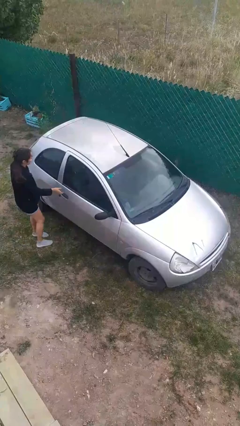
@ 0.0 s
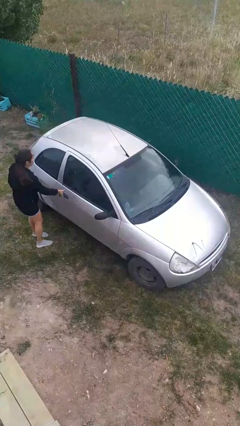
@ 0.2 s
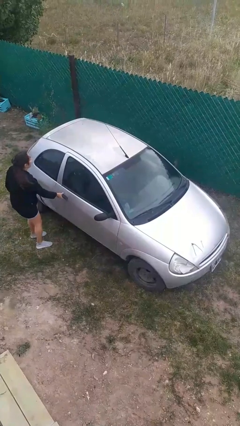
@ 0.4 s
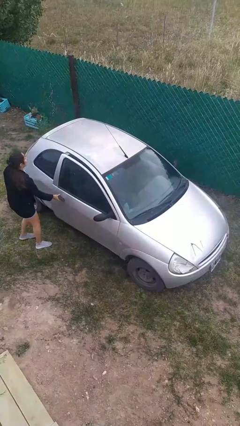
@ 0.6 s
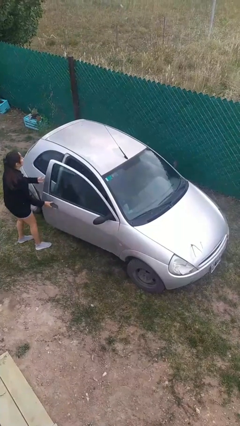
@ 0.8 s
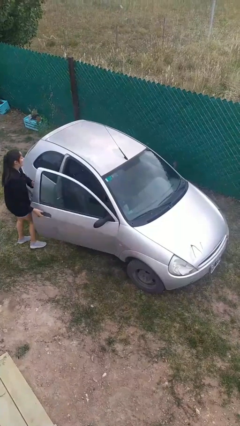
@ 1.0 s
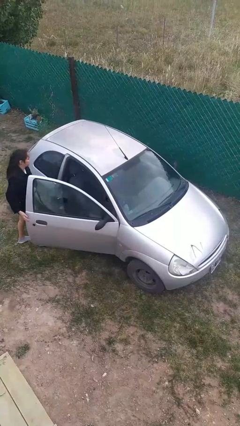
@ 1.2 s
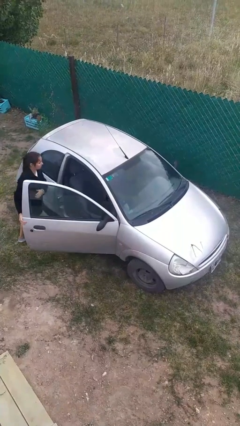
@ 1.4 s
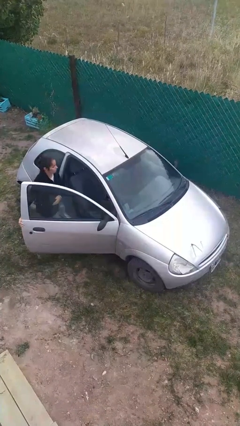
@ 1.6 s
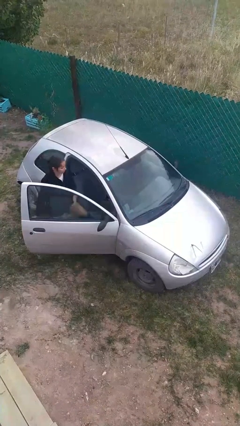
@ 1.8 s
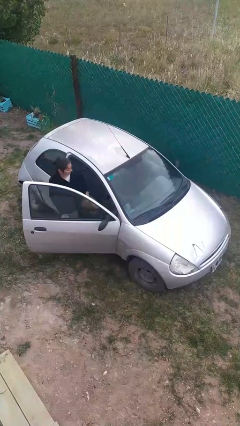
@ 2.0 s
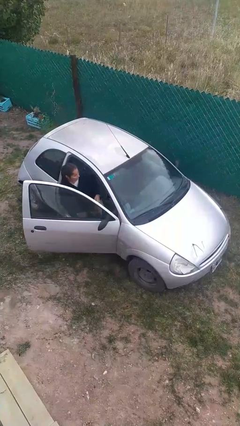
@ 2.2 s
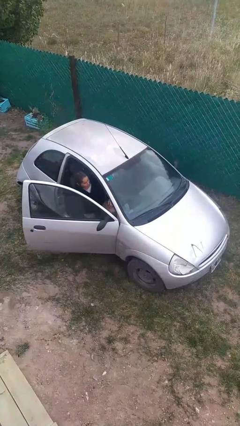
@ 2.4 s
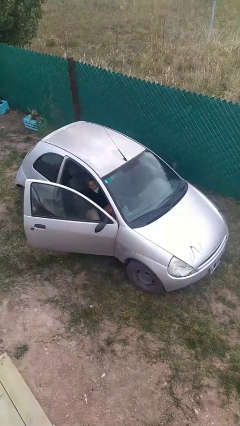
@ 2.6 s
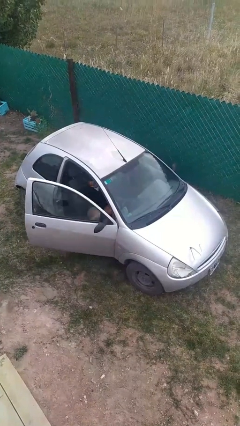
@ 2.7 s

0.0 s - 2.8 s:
car picks up person

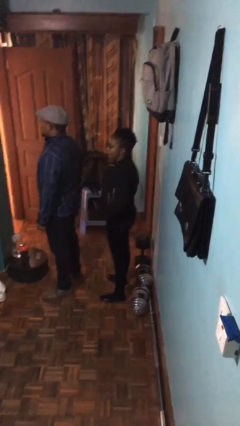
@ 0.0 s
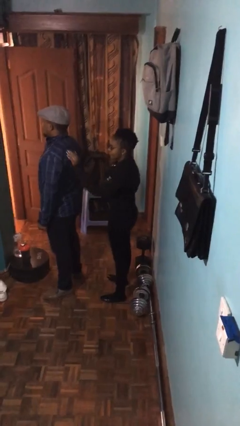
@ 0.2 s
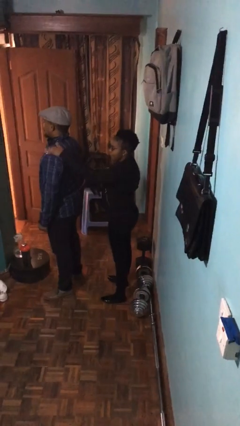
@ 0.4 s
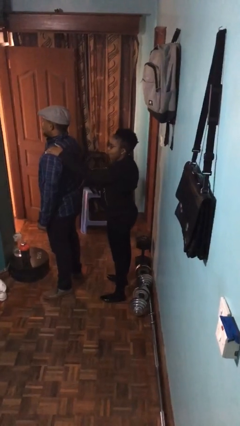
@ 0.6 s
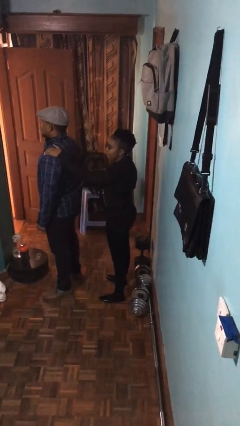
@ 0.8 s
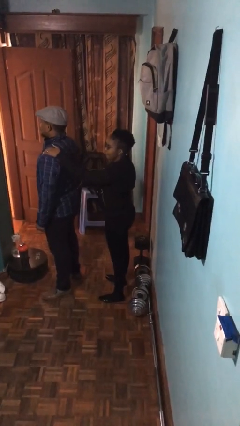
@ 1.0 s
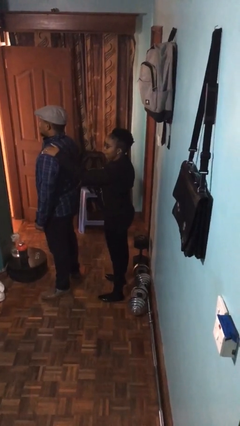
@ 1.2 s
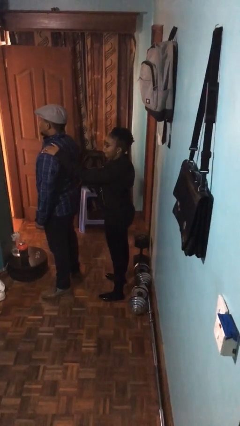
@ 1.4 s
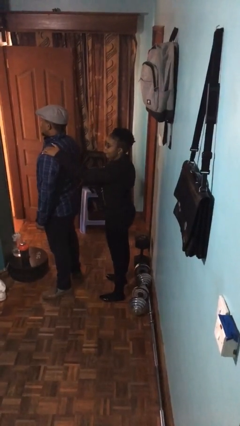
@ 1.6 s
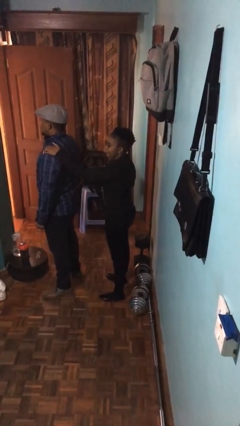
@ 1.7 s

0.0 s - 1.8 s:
person grabs person by shoulder

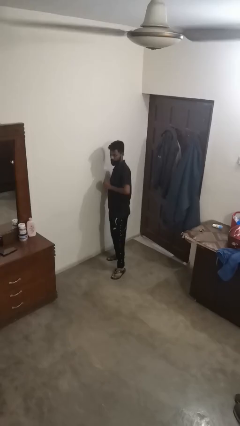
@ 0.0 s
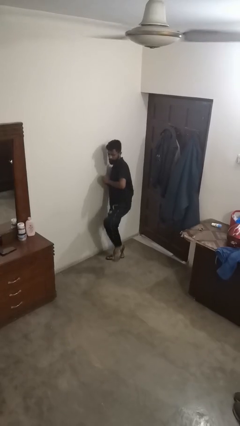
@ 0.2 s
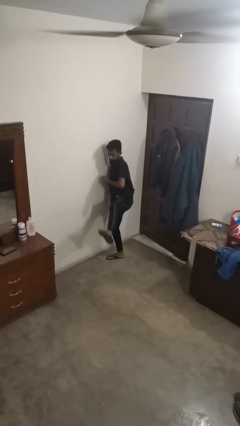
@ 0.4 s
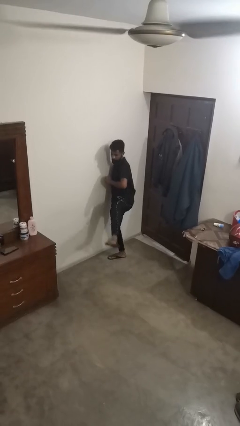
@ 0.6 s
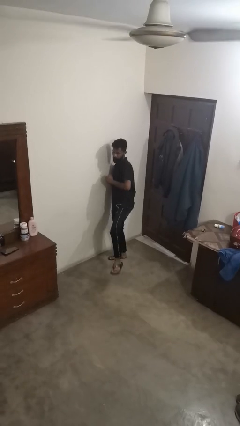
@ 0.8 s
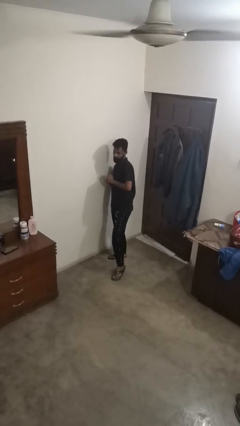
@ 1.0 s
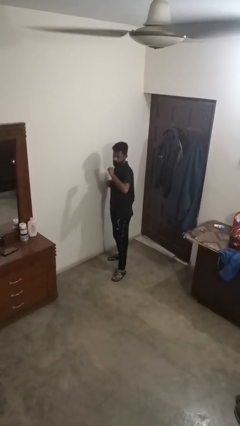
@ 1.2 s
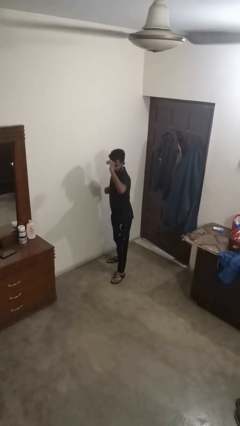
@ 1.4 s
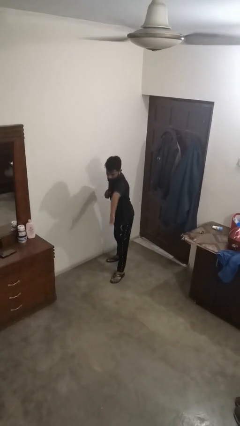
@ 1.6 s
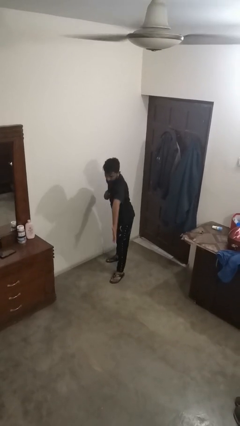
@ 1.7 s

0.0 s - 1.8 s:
person karate kicks

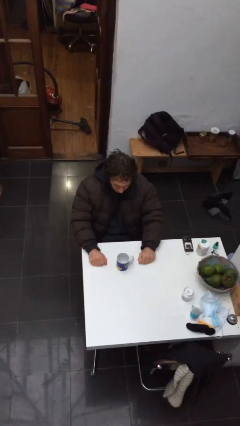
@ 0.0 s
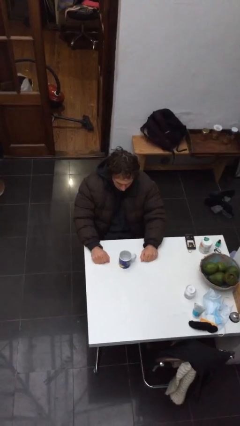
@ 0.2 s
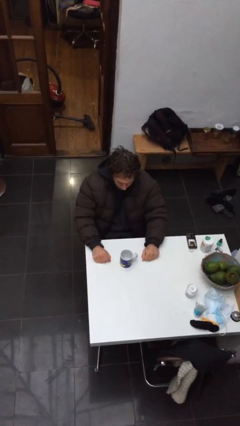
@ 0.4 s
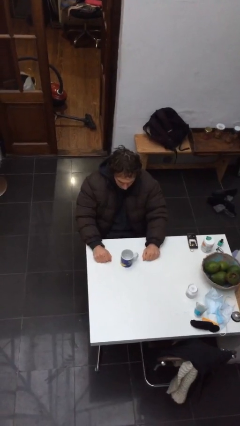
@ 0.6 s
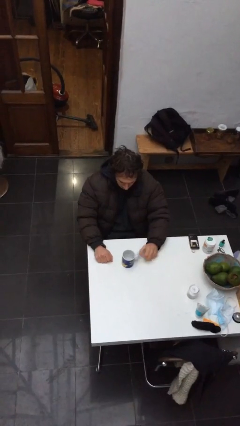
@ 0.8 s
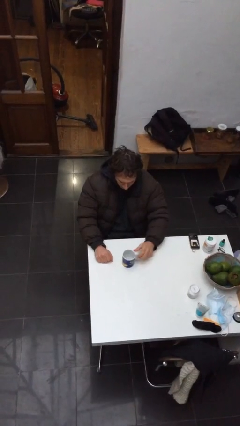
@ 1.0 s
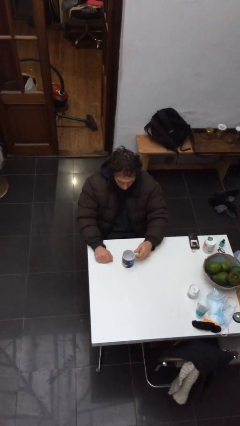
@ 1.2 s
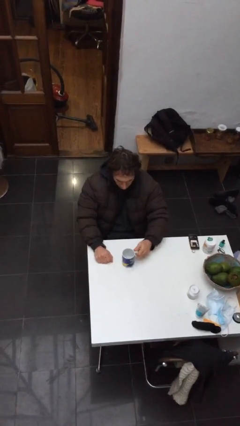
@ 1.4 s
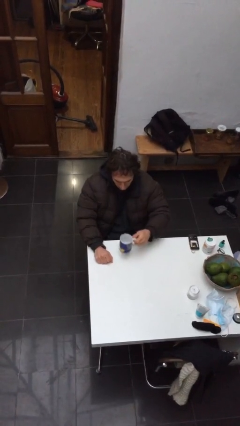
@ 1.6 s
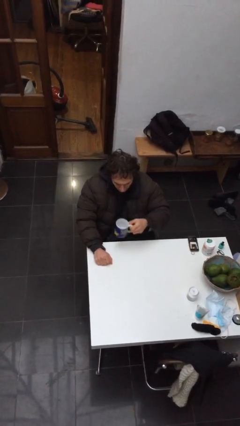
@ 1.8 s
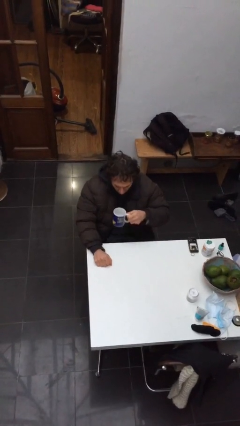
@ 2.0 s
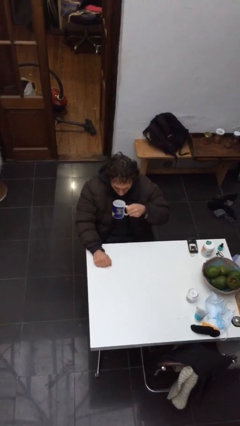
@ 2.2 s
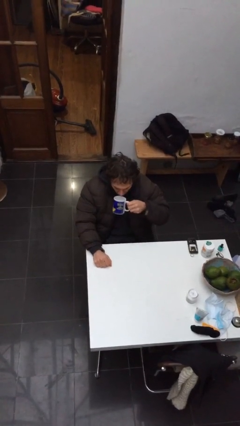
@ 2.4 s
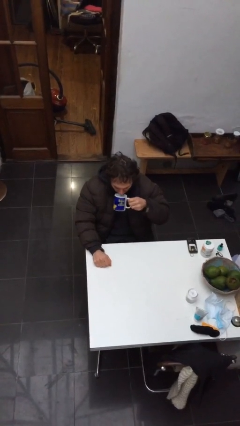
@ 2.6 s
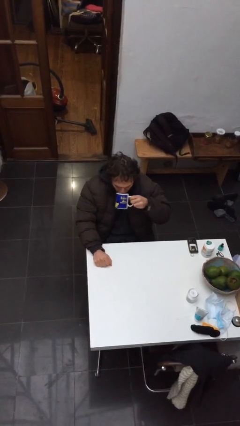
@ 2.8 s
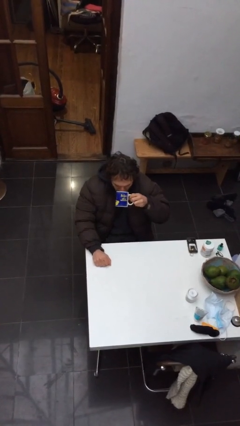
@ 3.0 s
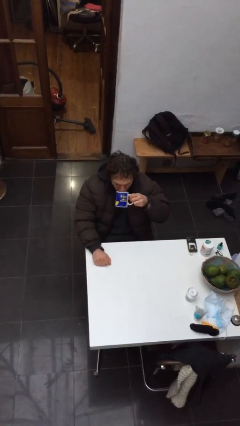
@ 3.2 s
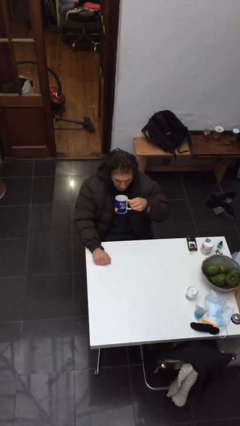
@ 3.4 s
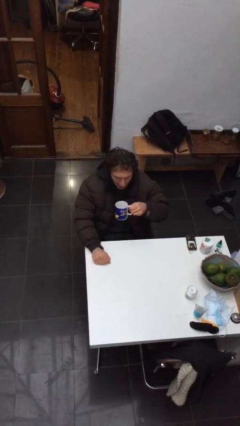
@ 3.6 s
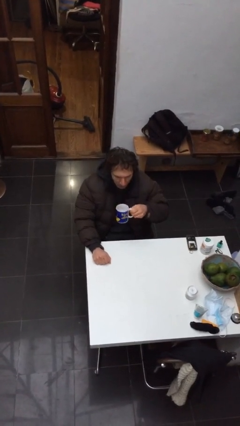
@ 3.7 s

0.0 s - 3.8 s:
person picks up object from table

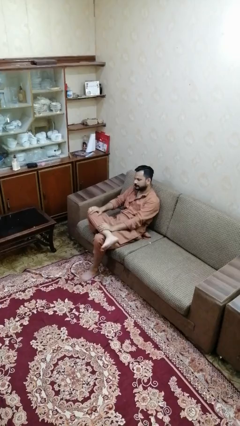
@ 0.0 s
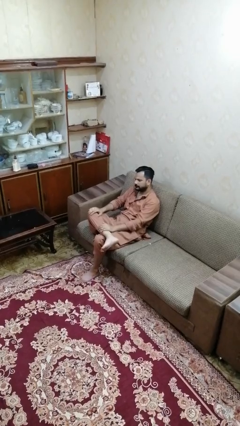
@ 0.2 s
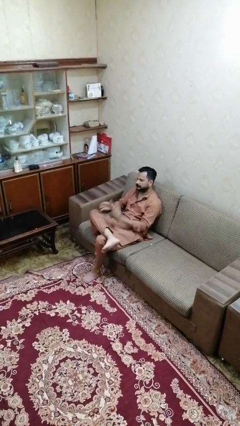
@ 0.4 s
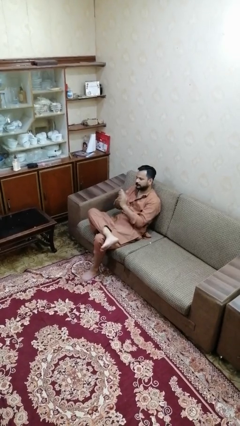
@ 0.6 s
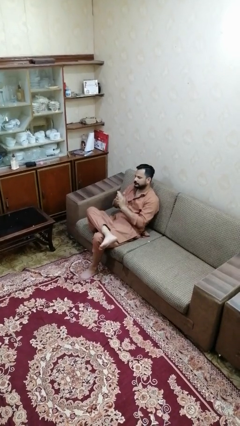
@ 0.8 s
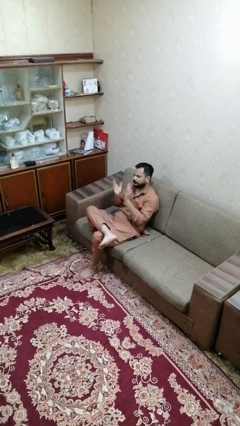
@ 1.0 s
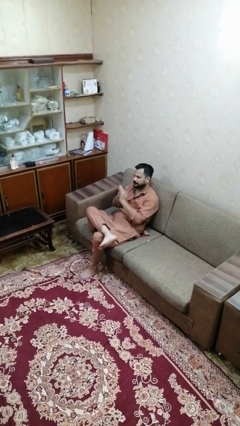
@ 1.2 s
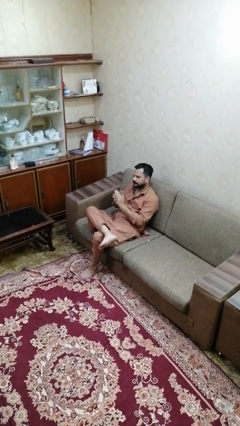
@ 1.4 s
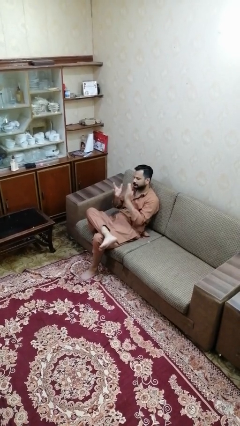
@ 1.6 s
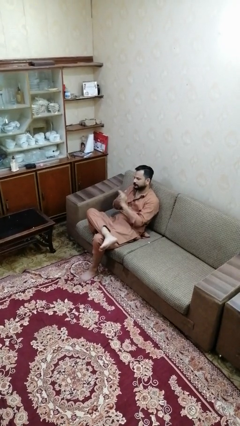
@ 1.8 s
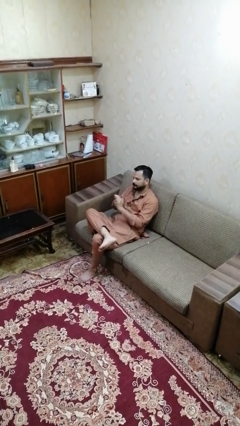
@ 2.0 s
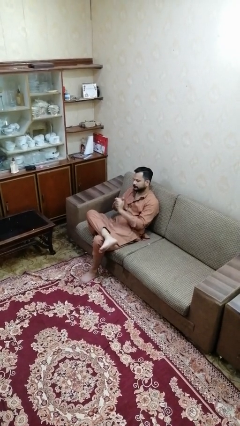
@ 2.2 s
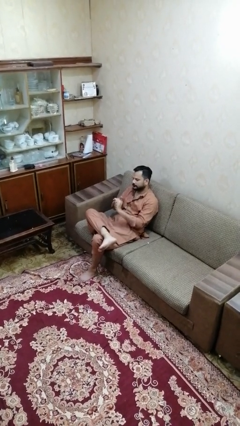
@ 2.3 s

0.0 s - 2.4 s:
person claps hands

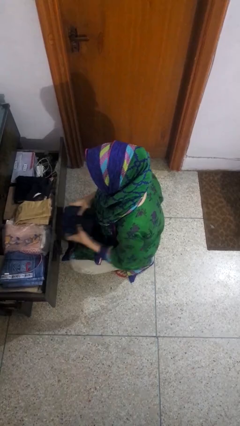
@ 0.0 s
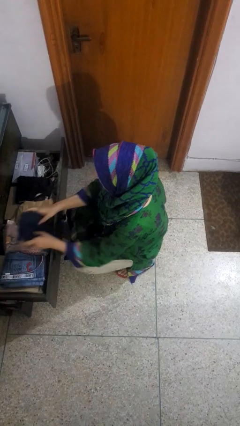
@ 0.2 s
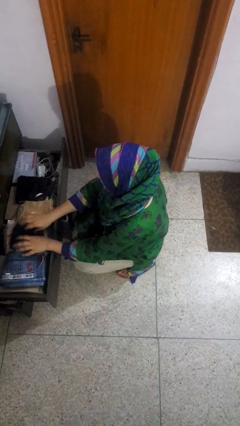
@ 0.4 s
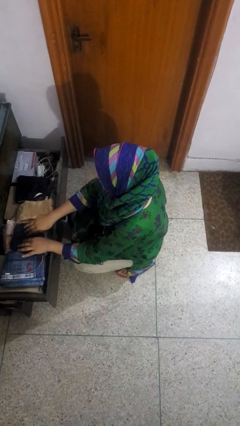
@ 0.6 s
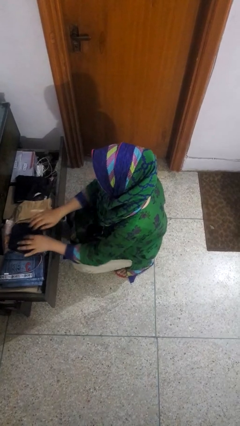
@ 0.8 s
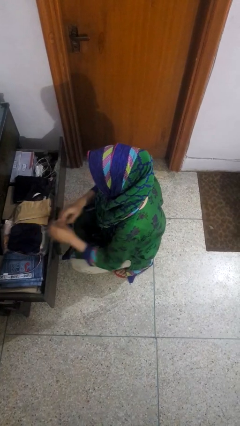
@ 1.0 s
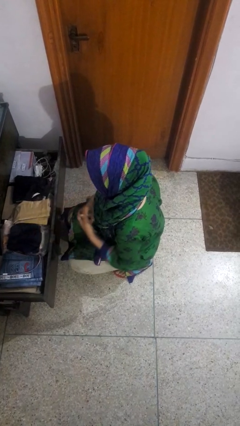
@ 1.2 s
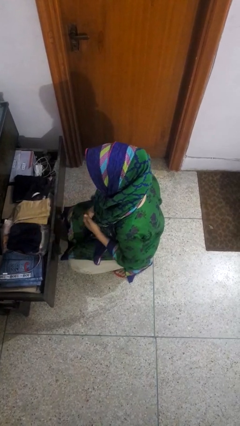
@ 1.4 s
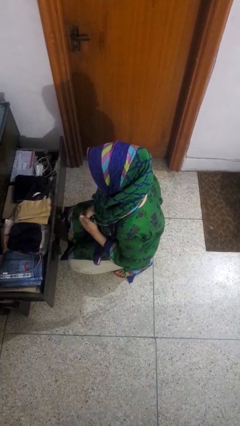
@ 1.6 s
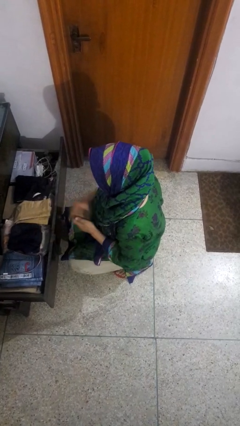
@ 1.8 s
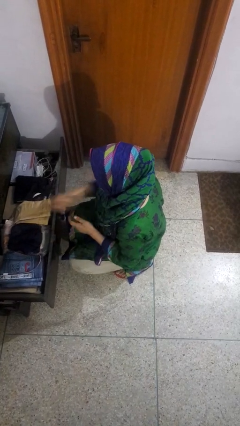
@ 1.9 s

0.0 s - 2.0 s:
person puts clothes into dresser

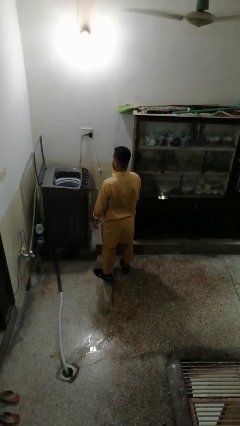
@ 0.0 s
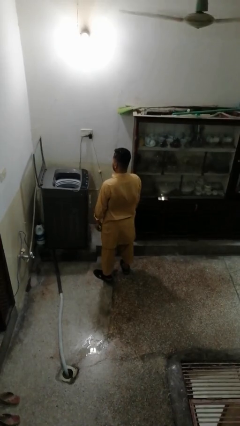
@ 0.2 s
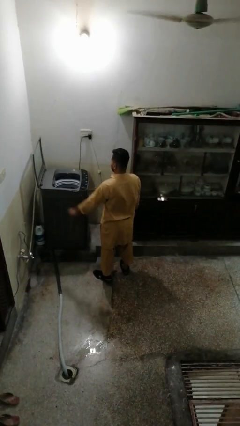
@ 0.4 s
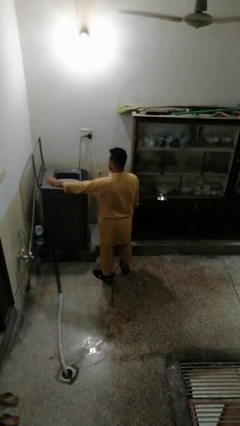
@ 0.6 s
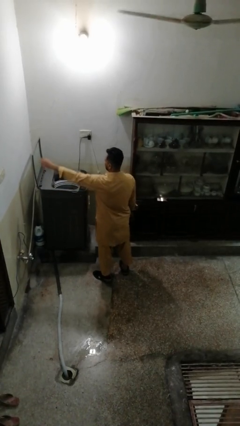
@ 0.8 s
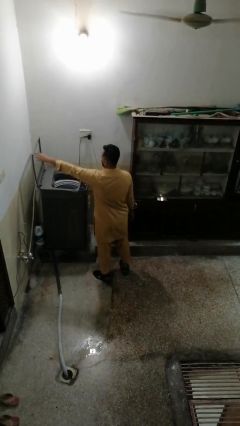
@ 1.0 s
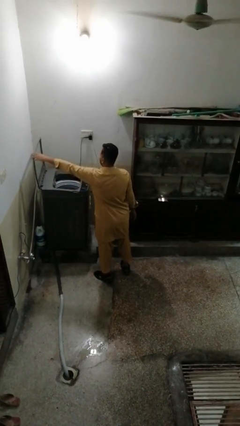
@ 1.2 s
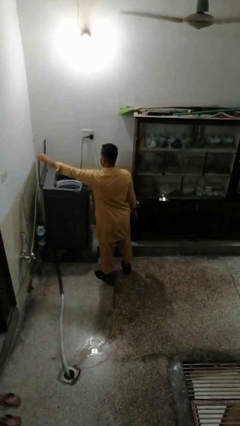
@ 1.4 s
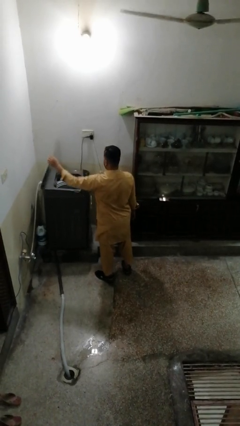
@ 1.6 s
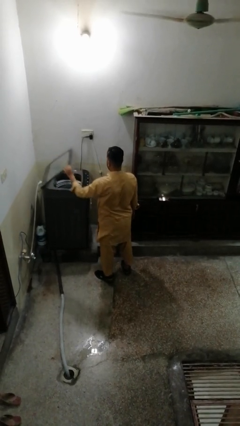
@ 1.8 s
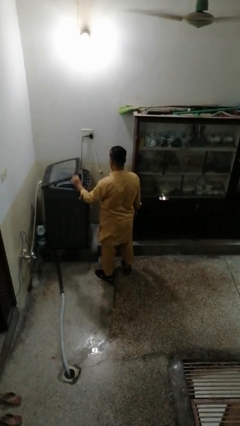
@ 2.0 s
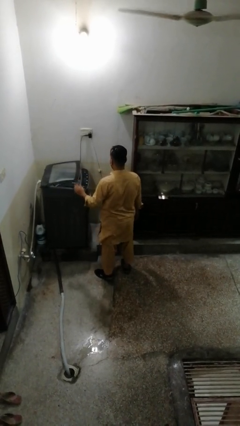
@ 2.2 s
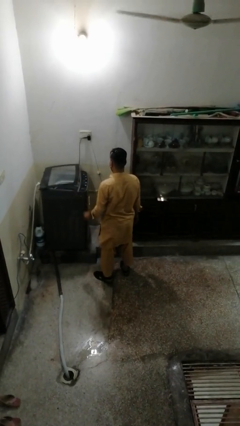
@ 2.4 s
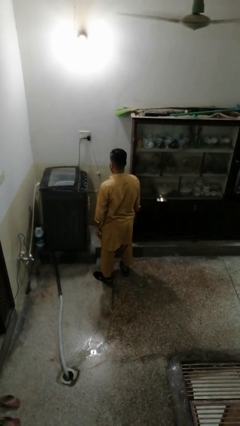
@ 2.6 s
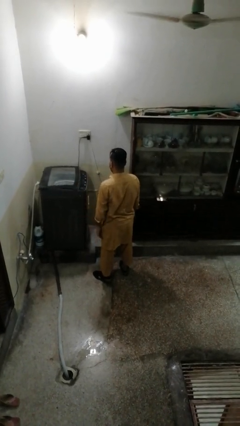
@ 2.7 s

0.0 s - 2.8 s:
person closes clothes washer
